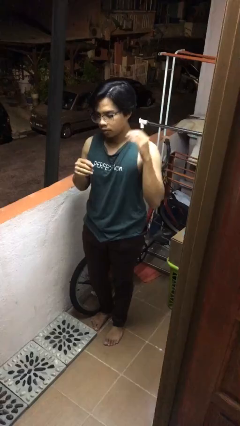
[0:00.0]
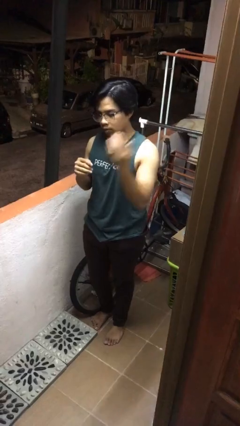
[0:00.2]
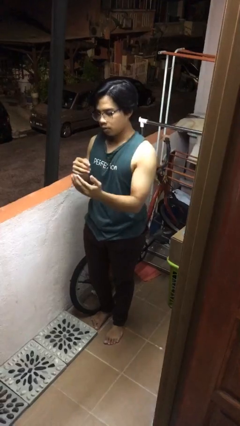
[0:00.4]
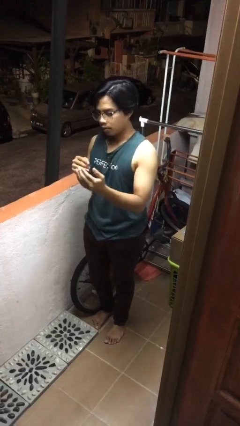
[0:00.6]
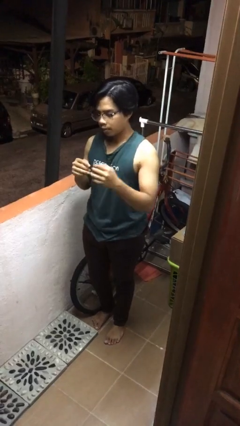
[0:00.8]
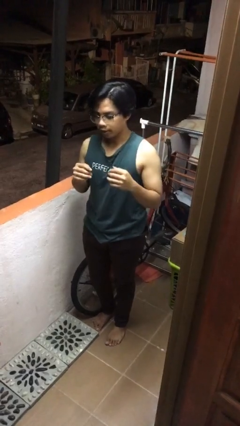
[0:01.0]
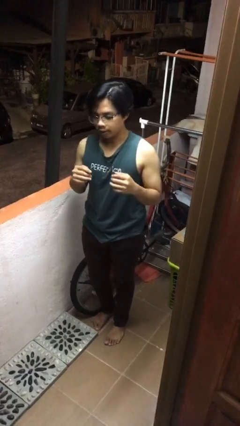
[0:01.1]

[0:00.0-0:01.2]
person karate chop

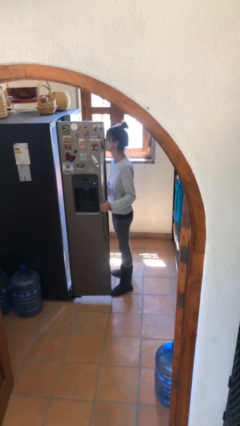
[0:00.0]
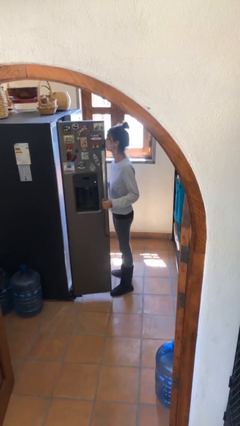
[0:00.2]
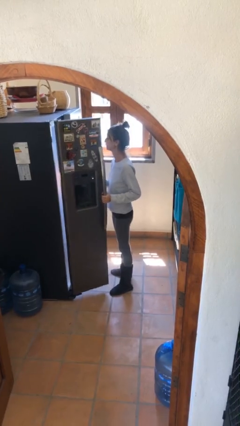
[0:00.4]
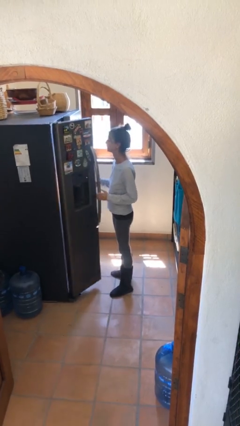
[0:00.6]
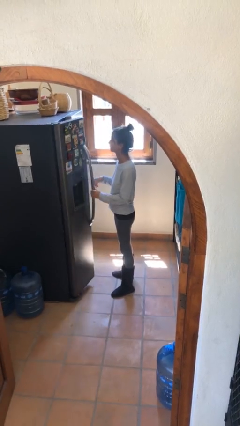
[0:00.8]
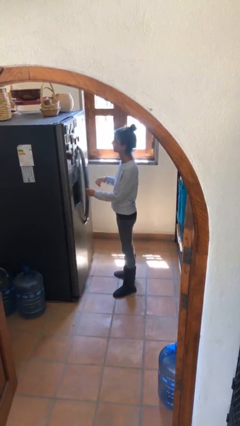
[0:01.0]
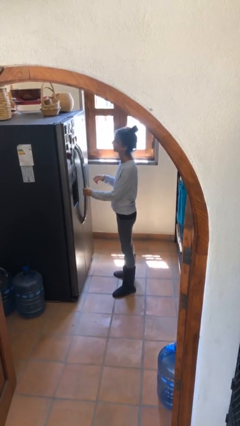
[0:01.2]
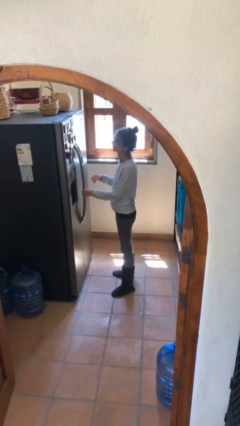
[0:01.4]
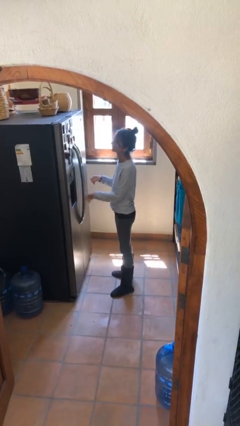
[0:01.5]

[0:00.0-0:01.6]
person closes refrigerator

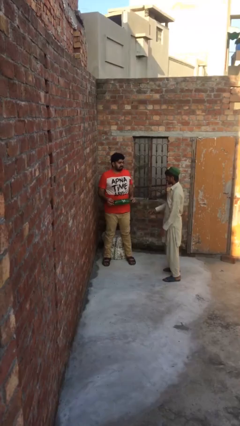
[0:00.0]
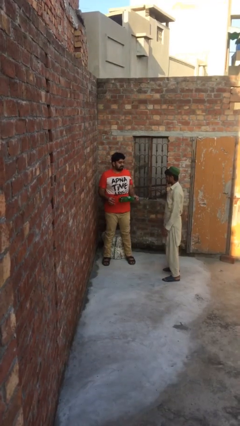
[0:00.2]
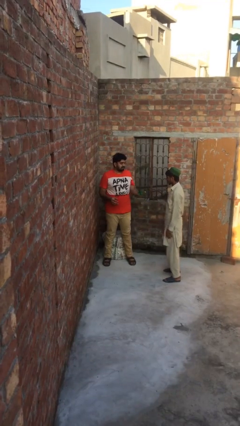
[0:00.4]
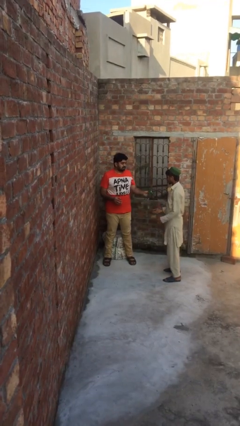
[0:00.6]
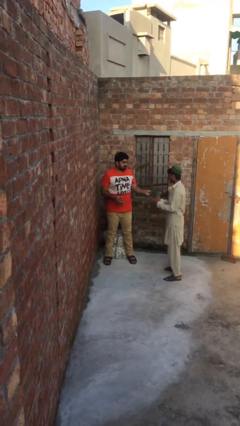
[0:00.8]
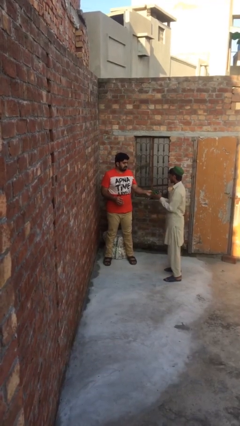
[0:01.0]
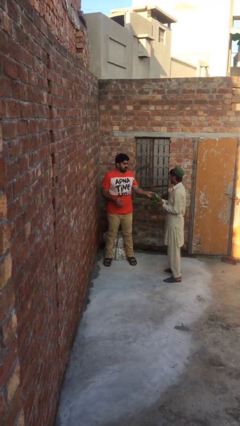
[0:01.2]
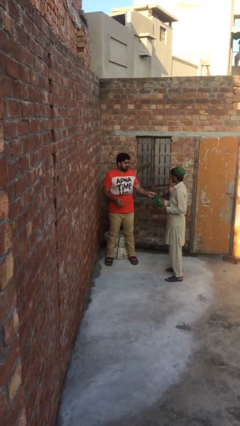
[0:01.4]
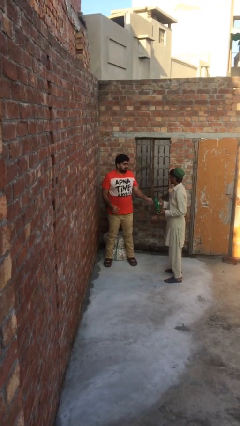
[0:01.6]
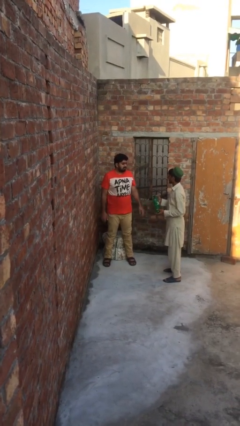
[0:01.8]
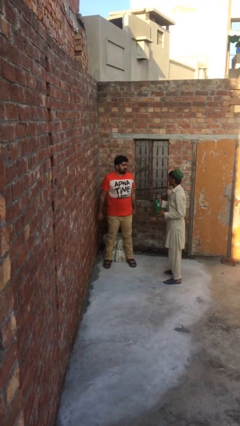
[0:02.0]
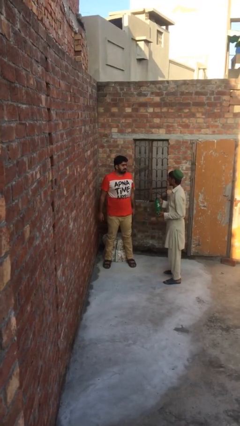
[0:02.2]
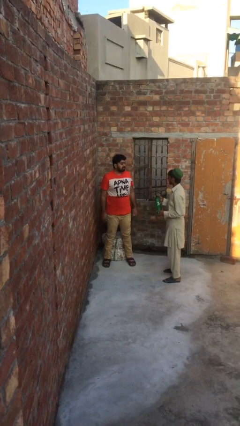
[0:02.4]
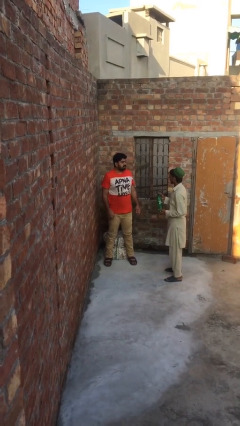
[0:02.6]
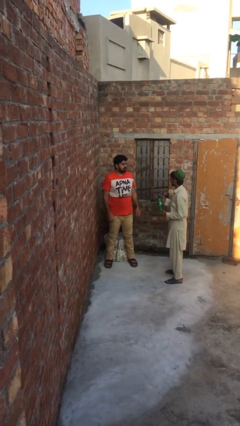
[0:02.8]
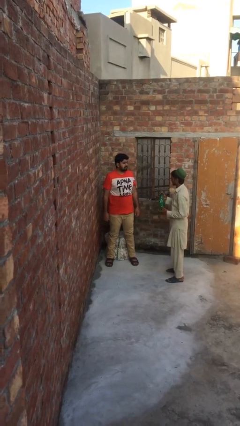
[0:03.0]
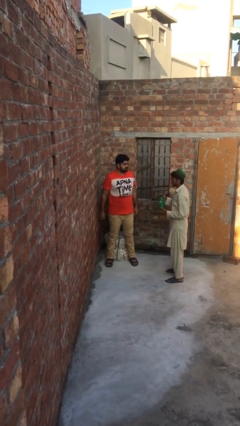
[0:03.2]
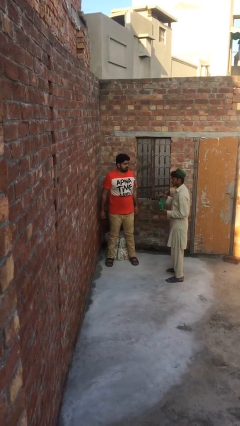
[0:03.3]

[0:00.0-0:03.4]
person transfers object to person

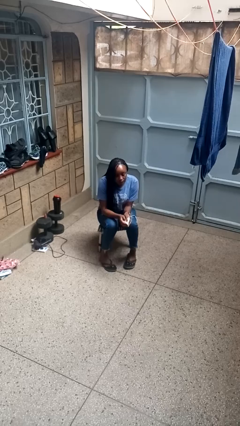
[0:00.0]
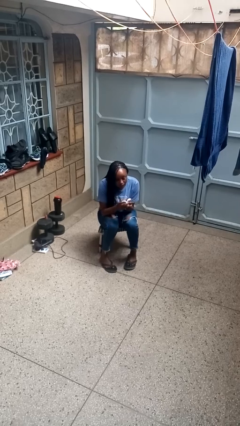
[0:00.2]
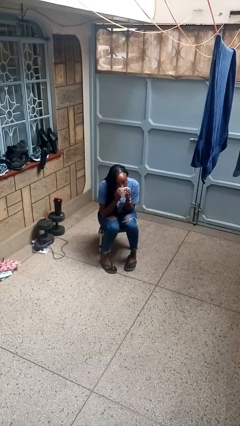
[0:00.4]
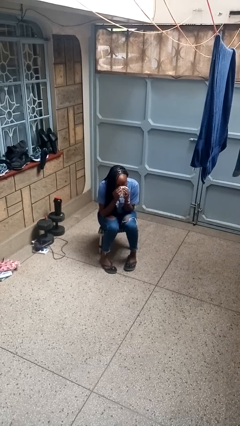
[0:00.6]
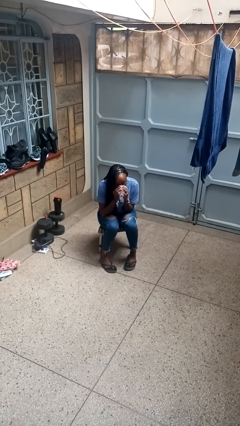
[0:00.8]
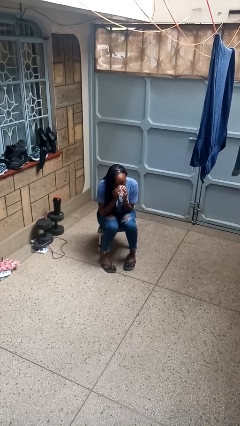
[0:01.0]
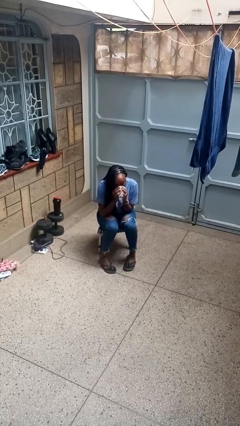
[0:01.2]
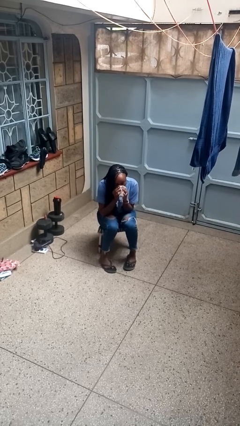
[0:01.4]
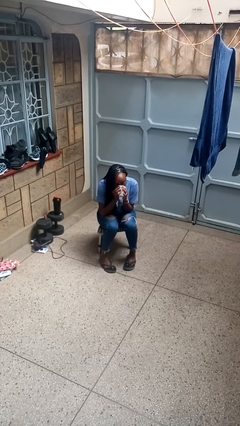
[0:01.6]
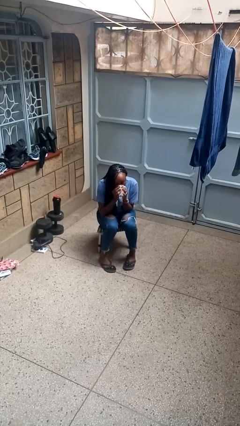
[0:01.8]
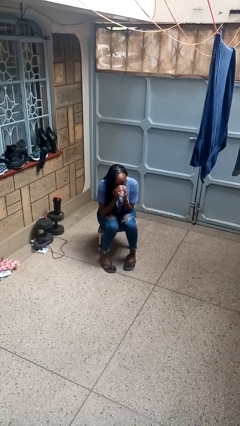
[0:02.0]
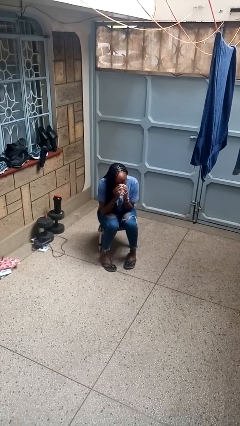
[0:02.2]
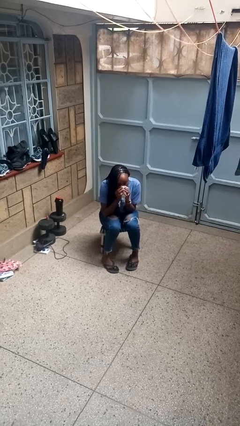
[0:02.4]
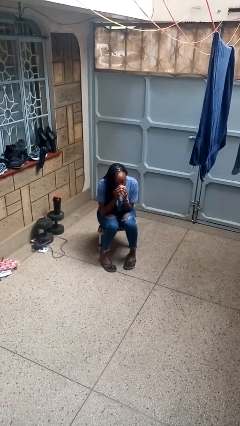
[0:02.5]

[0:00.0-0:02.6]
person blows nose

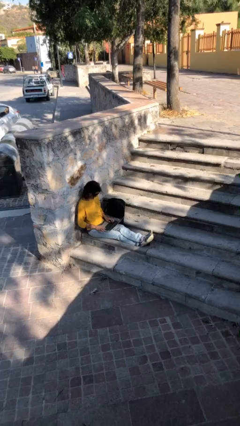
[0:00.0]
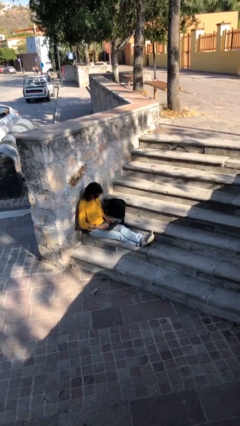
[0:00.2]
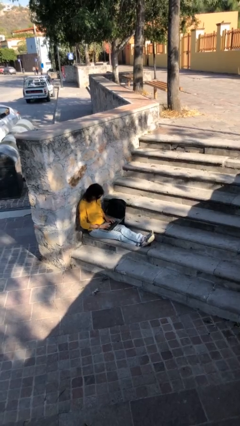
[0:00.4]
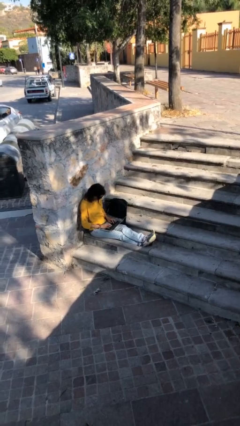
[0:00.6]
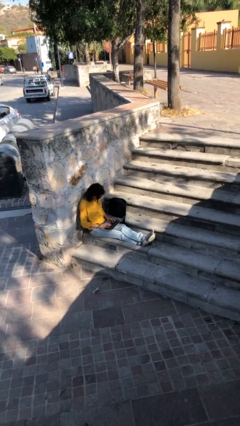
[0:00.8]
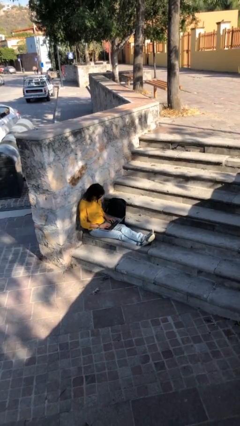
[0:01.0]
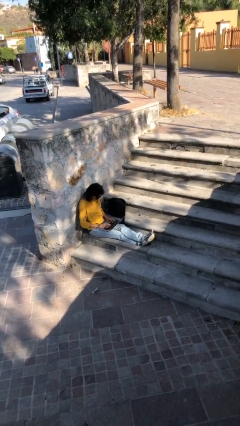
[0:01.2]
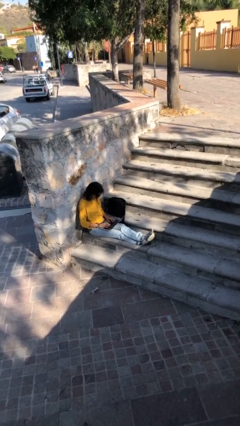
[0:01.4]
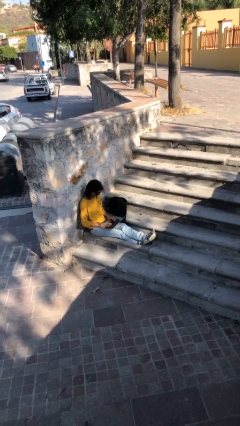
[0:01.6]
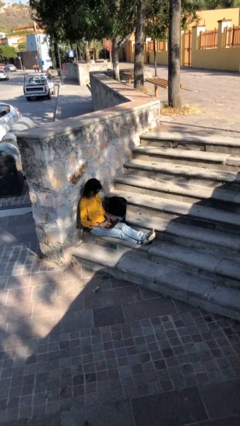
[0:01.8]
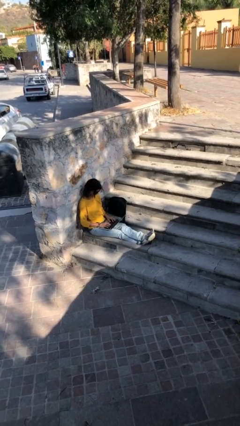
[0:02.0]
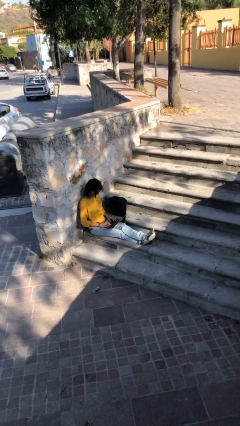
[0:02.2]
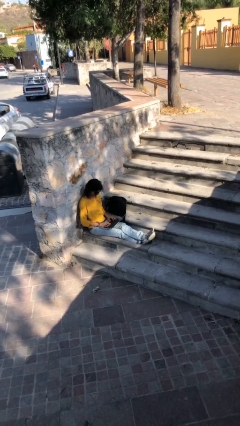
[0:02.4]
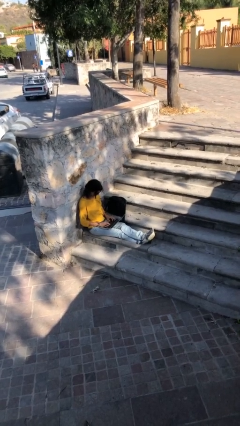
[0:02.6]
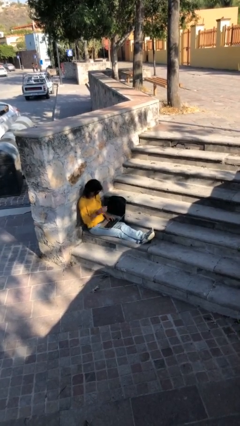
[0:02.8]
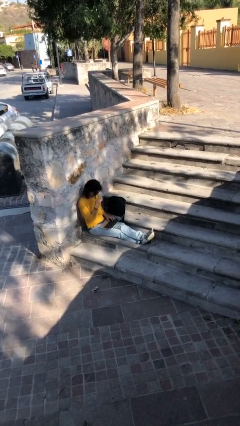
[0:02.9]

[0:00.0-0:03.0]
person interacts with laptop

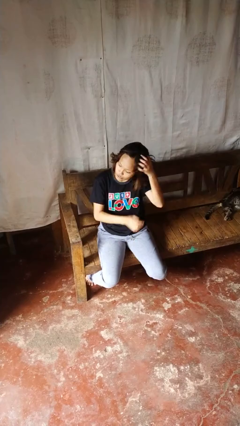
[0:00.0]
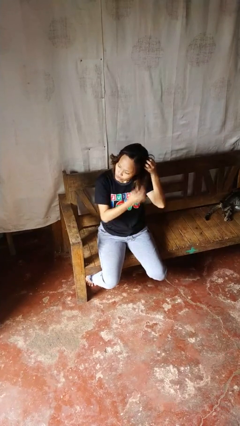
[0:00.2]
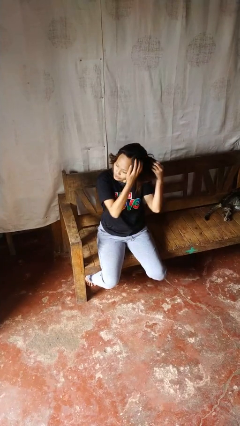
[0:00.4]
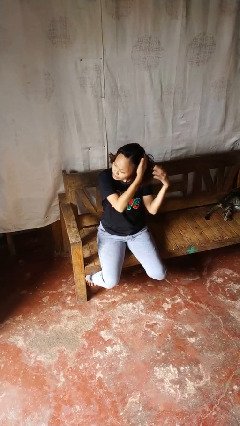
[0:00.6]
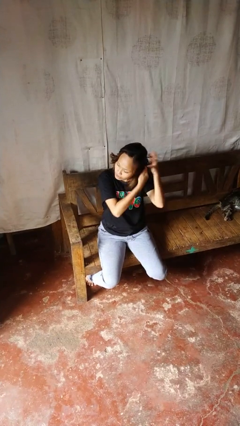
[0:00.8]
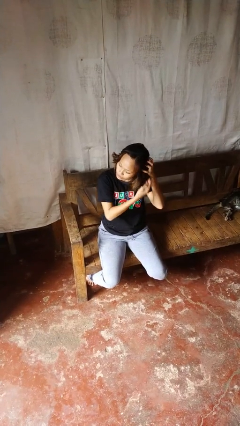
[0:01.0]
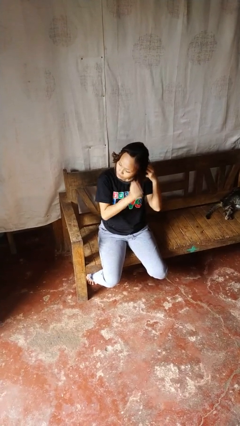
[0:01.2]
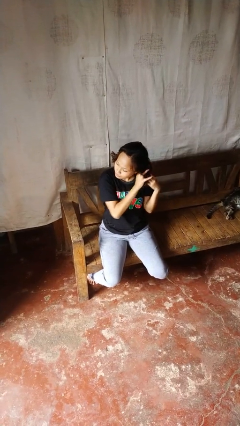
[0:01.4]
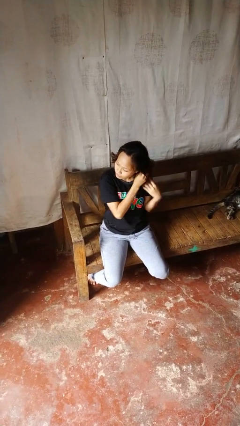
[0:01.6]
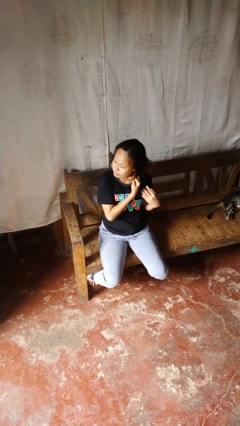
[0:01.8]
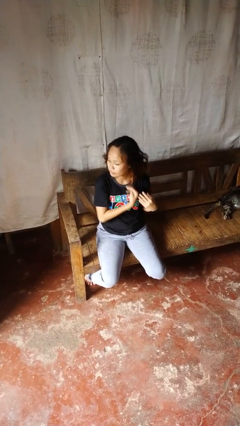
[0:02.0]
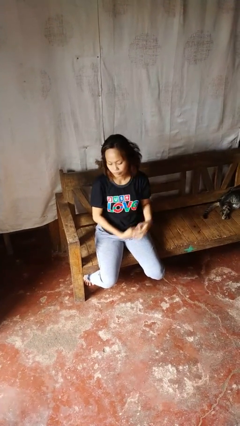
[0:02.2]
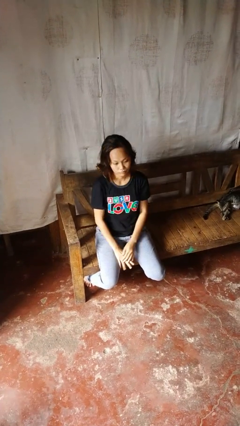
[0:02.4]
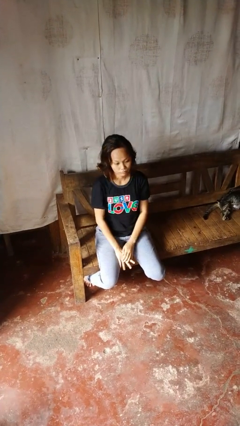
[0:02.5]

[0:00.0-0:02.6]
person strokes hair

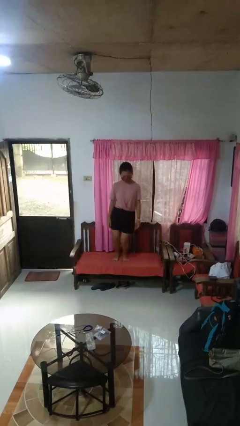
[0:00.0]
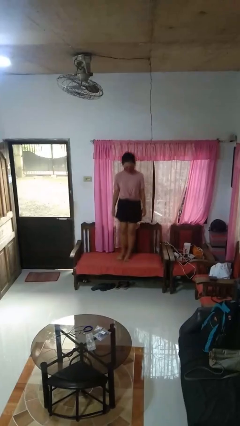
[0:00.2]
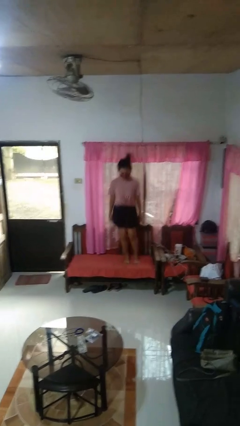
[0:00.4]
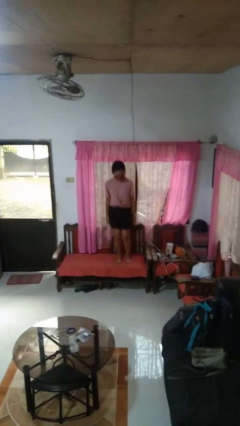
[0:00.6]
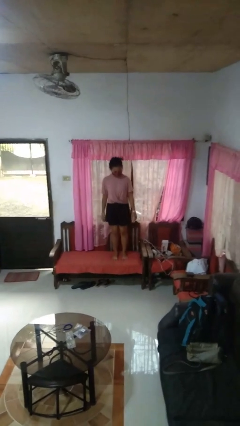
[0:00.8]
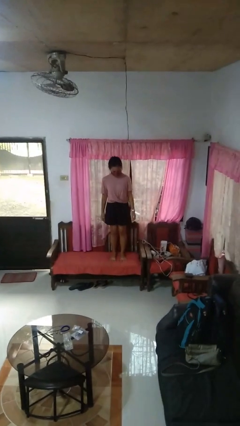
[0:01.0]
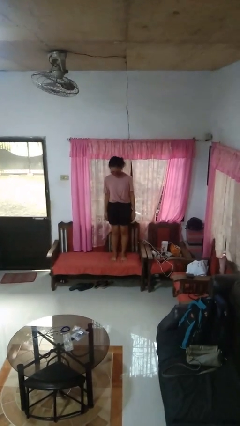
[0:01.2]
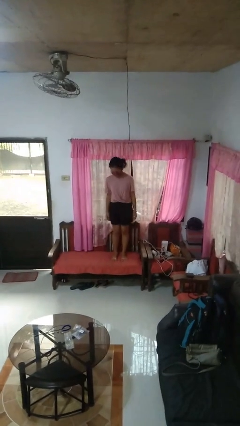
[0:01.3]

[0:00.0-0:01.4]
person jumps on couch

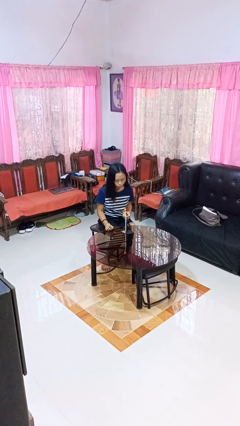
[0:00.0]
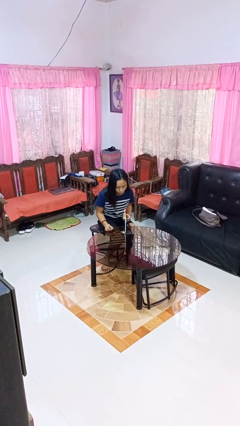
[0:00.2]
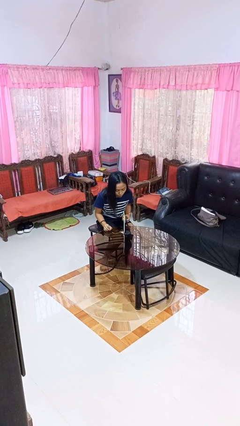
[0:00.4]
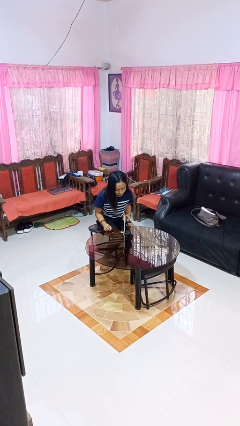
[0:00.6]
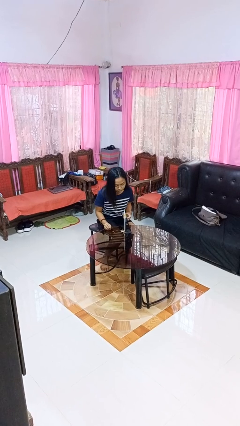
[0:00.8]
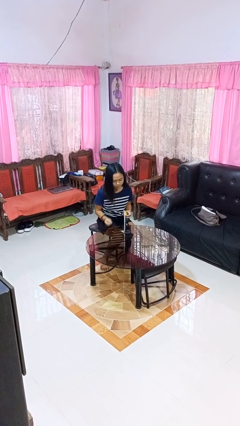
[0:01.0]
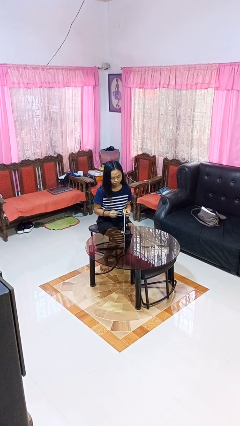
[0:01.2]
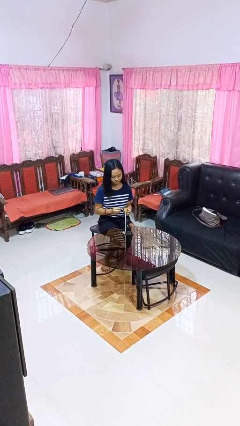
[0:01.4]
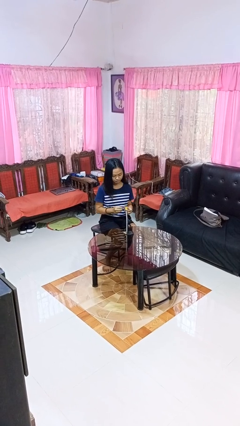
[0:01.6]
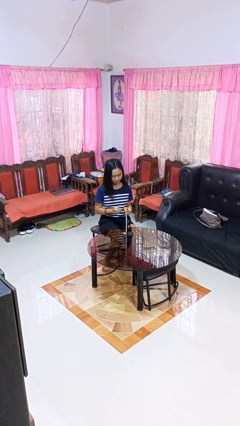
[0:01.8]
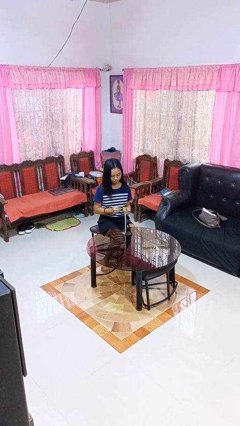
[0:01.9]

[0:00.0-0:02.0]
person extinguishes candle
